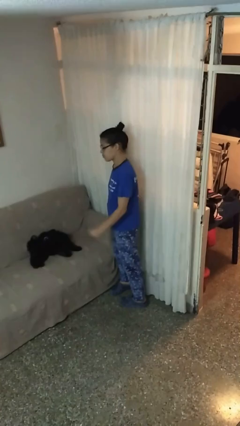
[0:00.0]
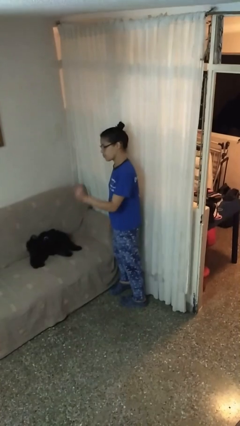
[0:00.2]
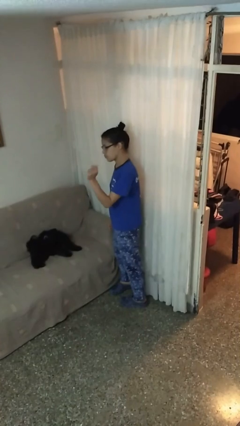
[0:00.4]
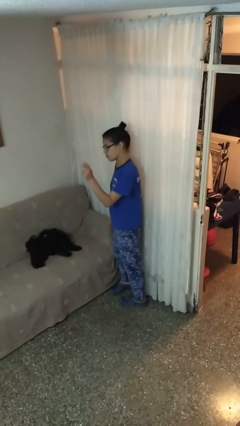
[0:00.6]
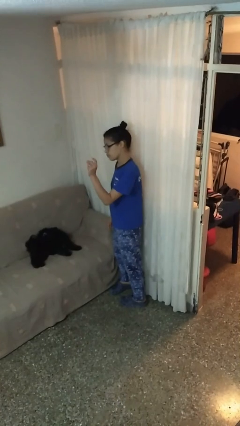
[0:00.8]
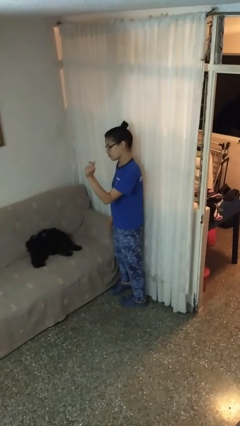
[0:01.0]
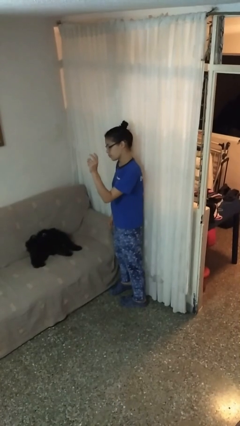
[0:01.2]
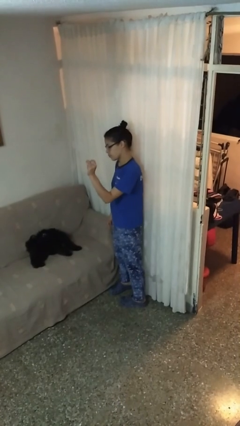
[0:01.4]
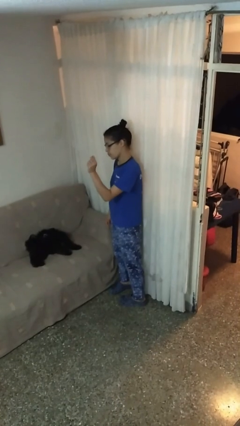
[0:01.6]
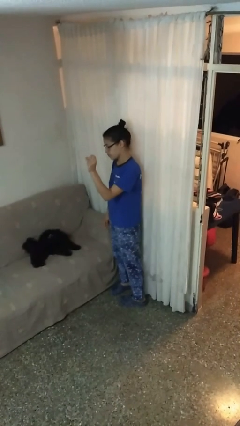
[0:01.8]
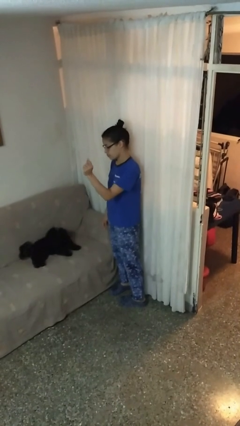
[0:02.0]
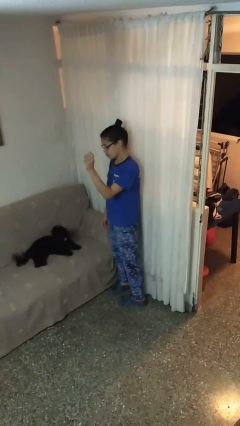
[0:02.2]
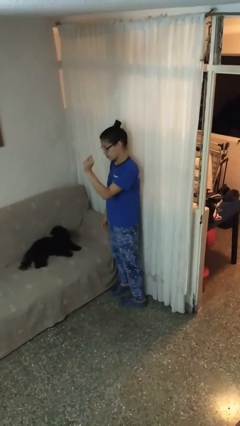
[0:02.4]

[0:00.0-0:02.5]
person snaps fingers

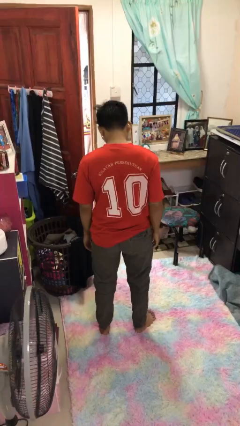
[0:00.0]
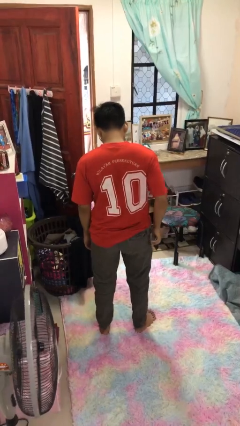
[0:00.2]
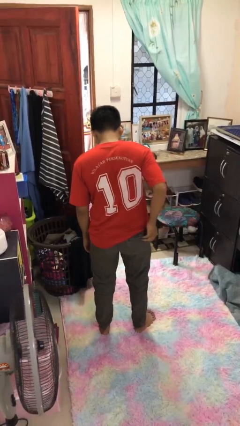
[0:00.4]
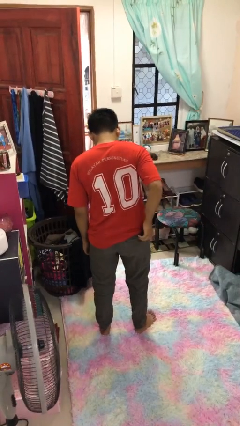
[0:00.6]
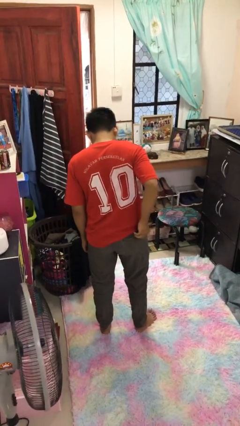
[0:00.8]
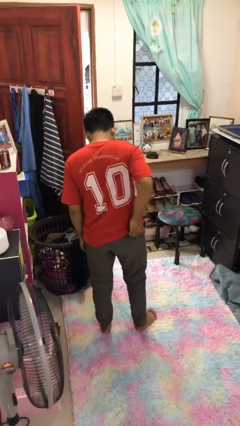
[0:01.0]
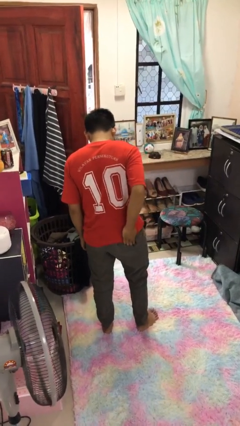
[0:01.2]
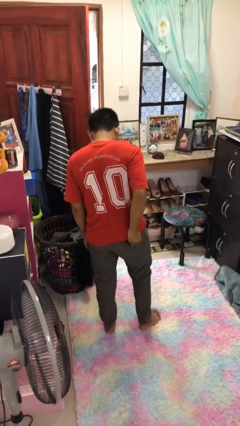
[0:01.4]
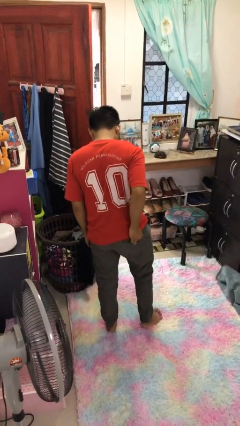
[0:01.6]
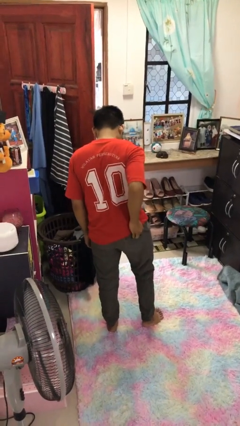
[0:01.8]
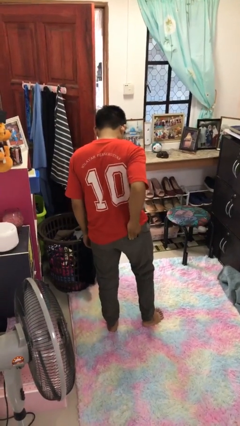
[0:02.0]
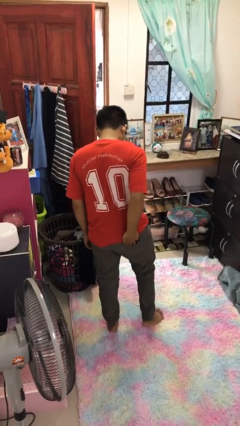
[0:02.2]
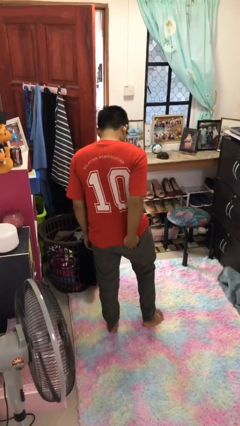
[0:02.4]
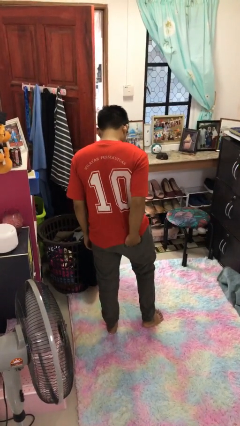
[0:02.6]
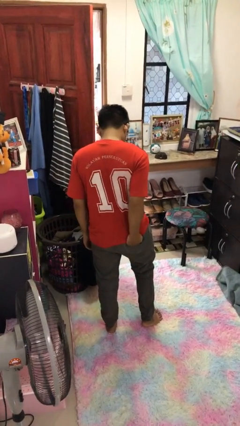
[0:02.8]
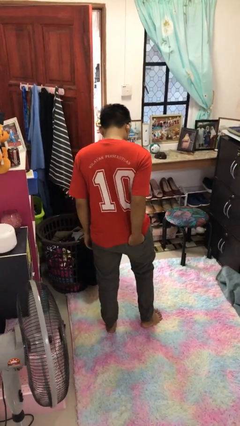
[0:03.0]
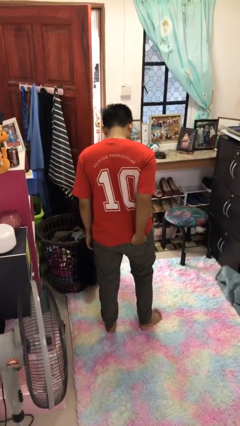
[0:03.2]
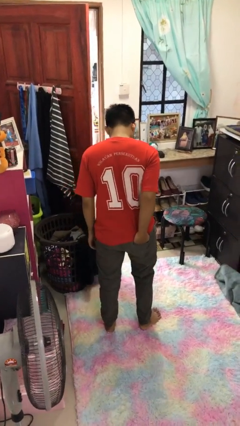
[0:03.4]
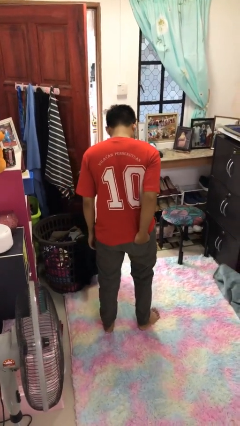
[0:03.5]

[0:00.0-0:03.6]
person puts hands in back pockets

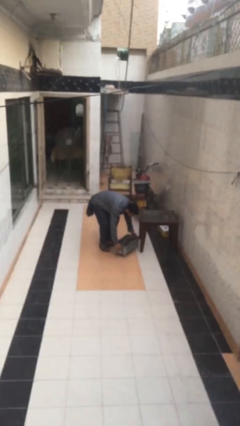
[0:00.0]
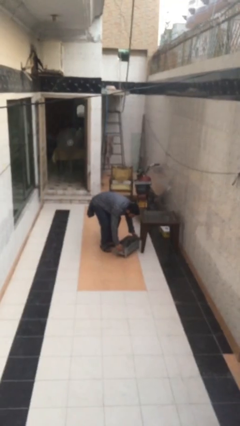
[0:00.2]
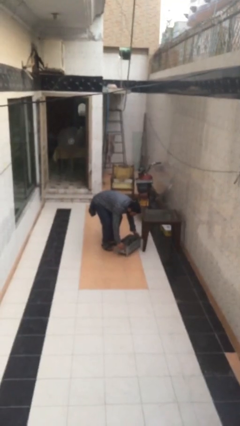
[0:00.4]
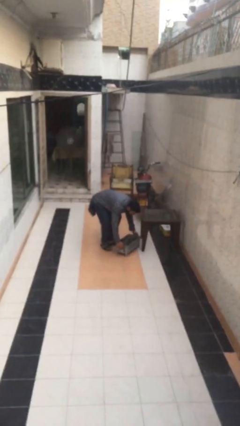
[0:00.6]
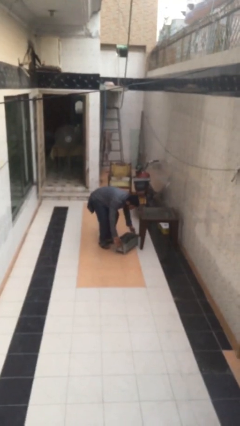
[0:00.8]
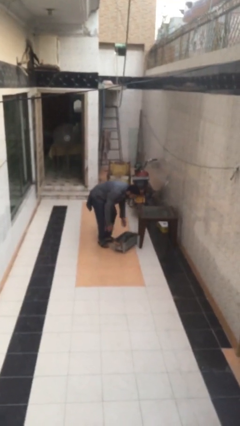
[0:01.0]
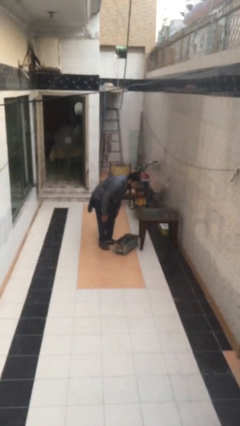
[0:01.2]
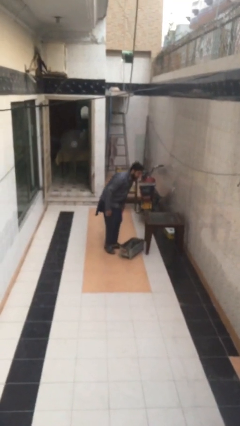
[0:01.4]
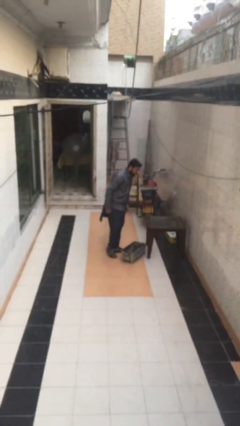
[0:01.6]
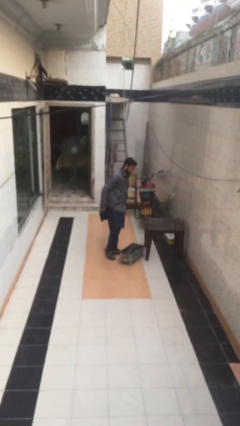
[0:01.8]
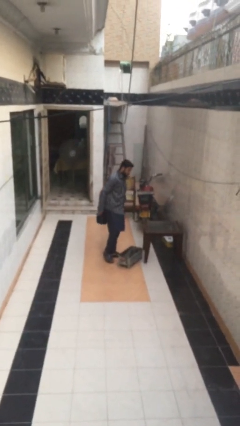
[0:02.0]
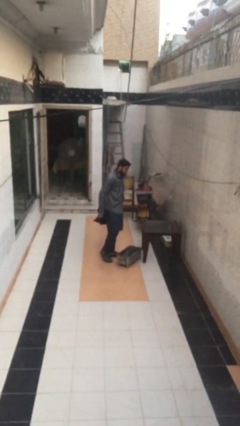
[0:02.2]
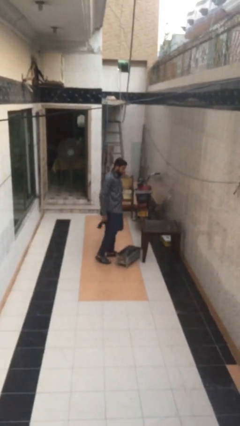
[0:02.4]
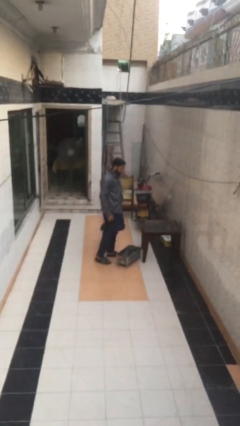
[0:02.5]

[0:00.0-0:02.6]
person puts down object on floor

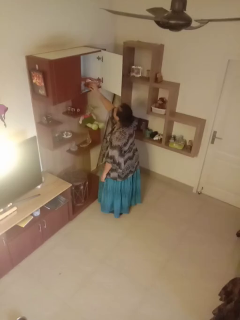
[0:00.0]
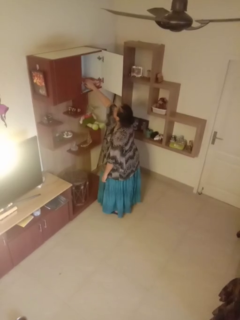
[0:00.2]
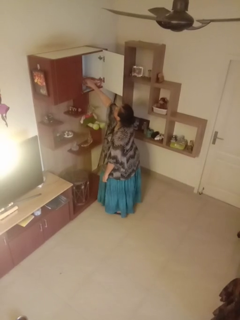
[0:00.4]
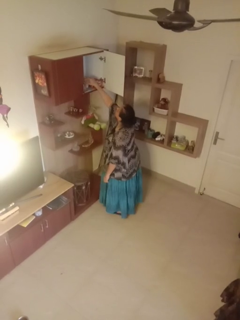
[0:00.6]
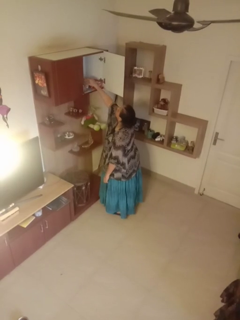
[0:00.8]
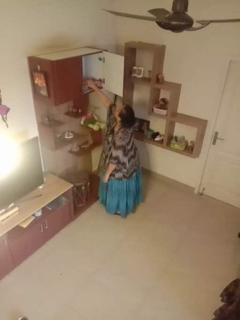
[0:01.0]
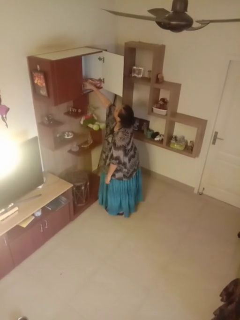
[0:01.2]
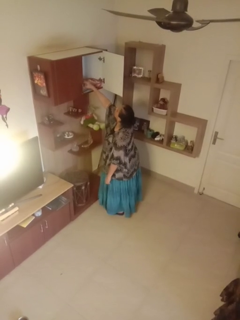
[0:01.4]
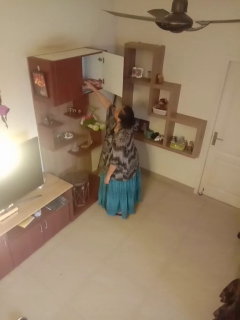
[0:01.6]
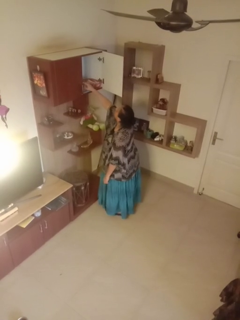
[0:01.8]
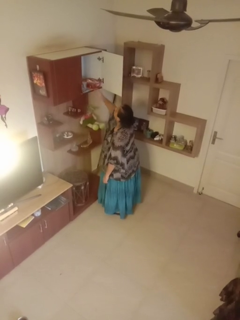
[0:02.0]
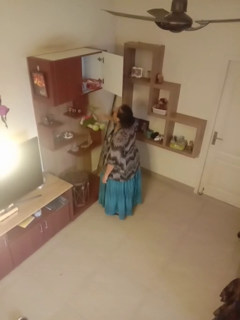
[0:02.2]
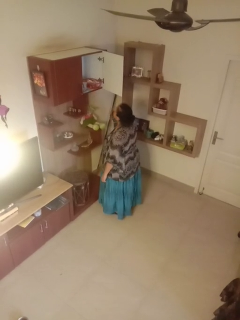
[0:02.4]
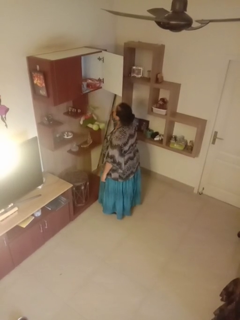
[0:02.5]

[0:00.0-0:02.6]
person searches in cabinet

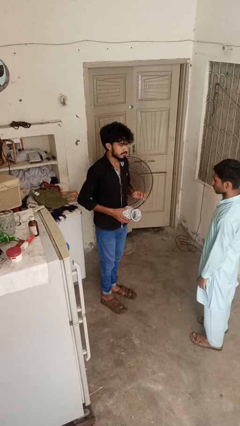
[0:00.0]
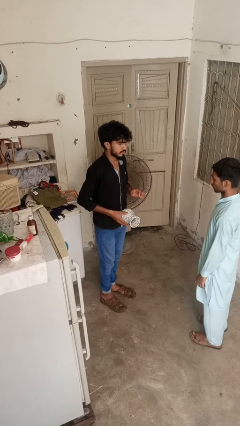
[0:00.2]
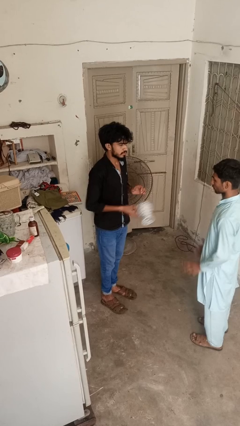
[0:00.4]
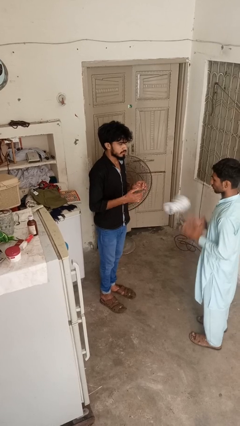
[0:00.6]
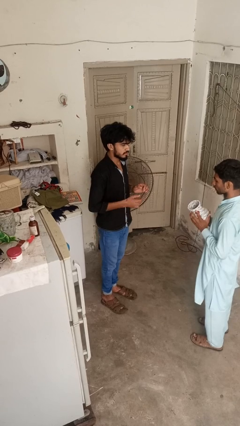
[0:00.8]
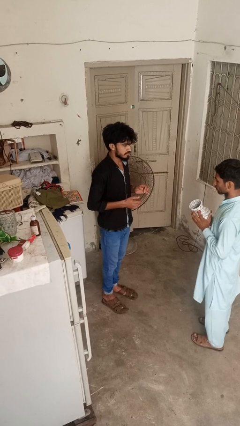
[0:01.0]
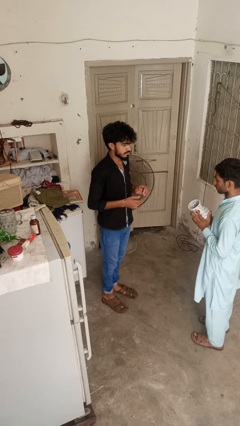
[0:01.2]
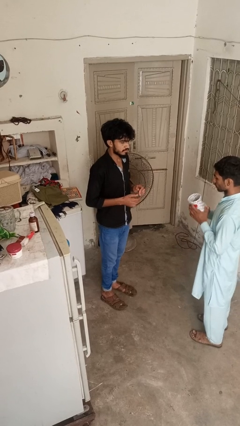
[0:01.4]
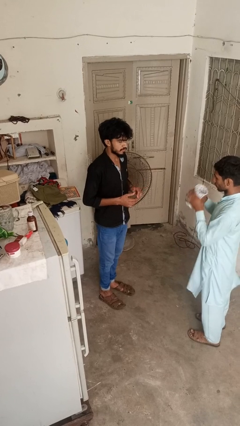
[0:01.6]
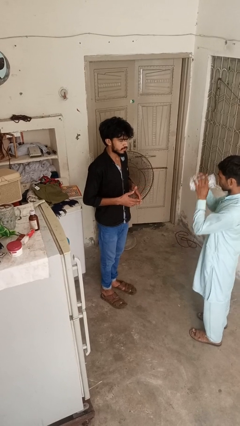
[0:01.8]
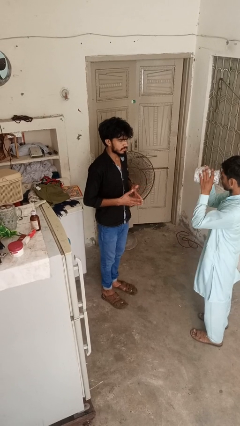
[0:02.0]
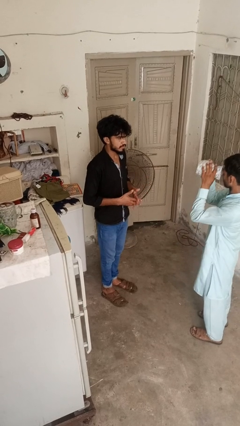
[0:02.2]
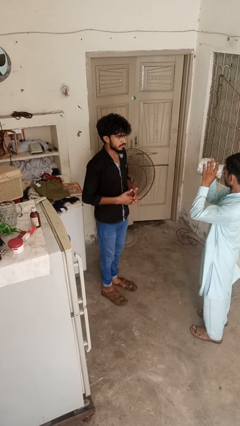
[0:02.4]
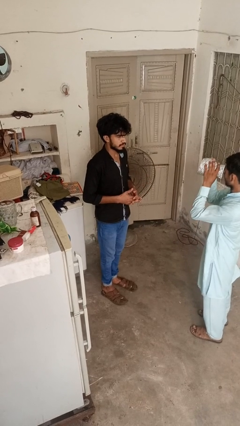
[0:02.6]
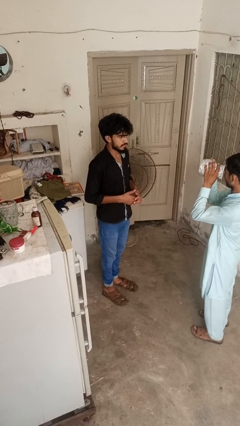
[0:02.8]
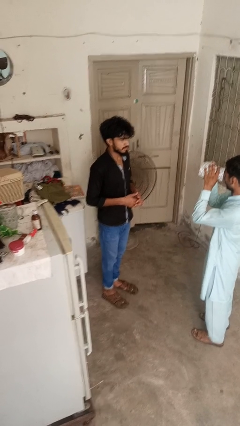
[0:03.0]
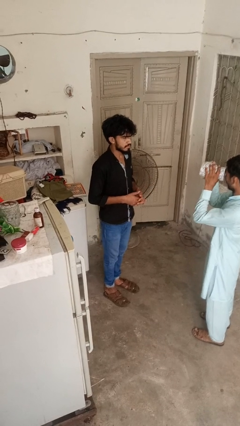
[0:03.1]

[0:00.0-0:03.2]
person throws object to person

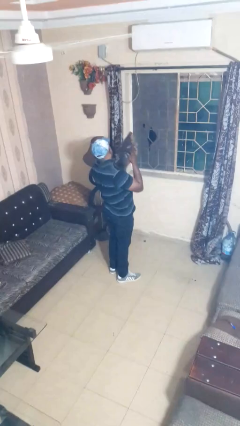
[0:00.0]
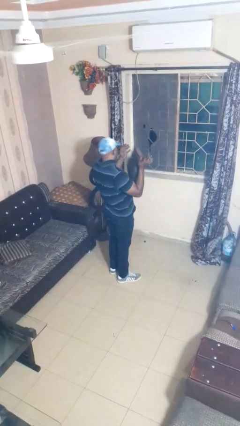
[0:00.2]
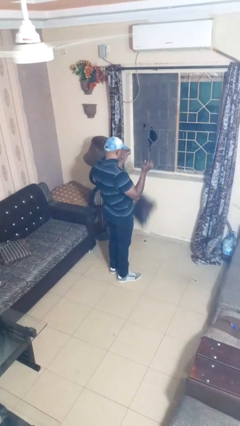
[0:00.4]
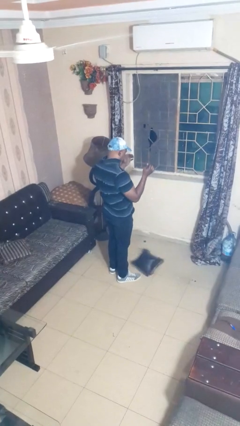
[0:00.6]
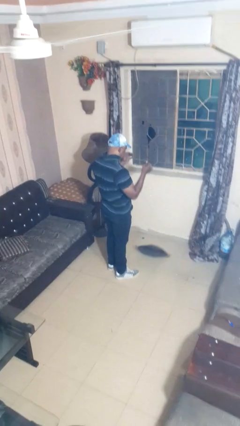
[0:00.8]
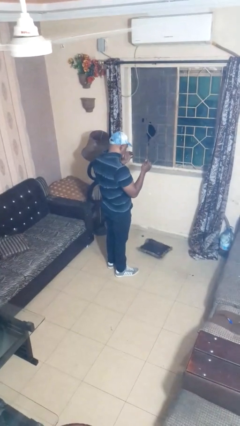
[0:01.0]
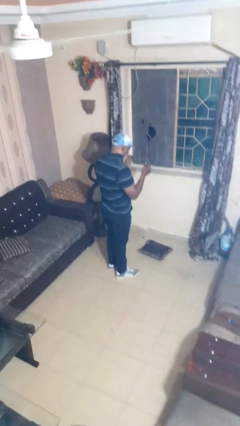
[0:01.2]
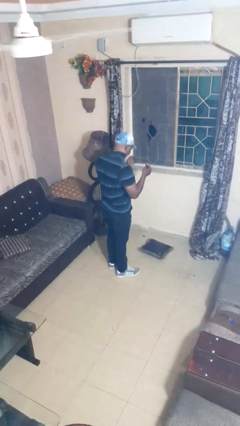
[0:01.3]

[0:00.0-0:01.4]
person catches dropped object

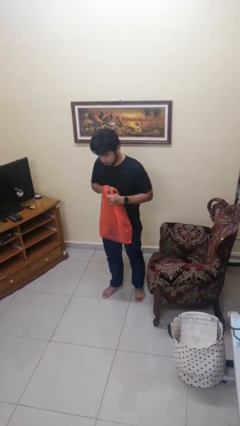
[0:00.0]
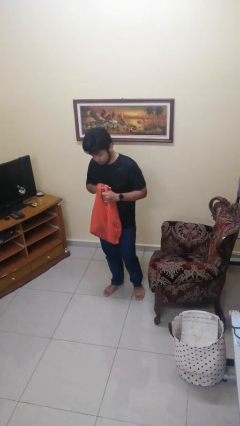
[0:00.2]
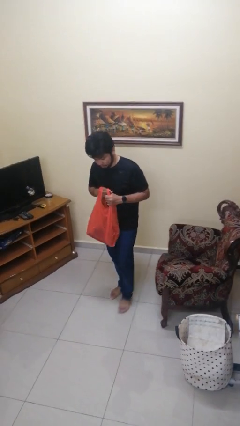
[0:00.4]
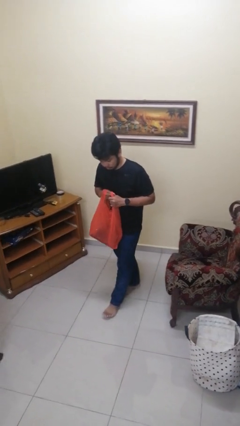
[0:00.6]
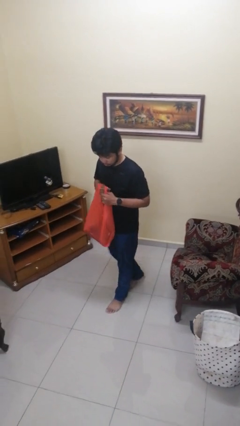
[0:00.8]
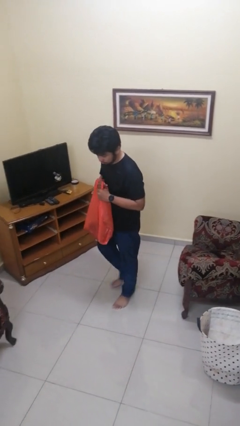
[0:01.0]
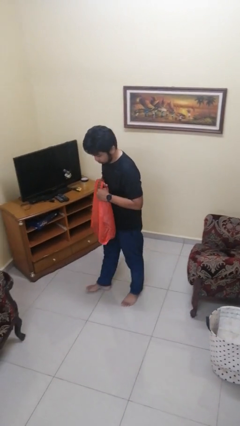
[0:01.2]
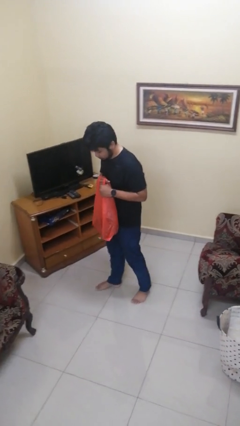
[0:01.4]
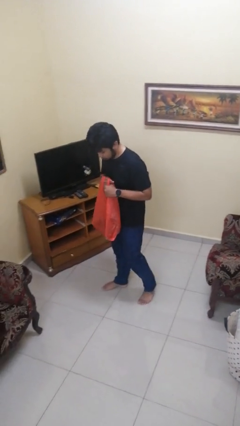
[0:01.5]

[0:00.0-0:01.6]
person carries groceries

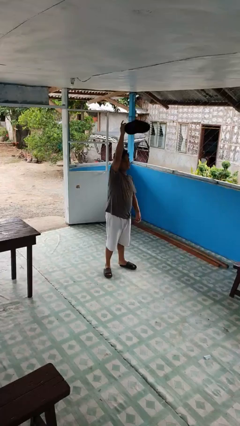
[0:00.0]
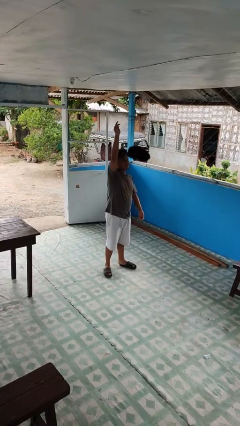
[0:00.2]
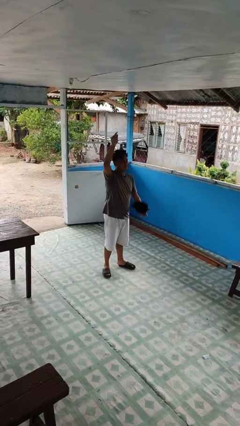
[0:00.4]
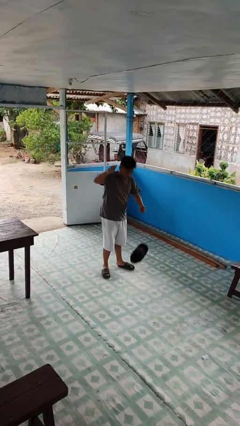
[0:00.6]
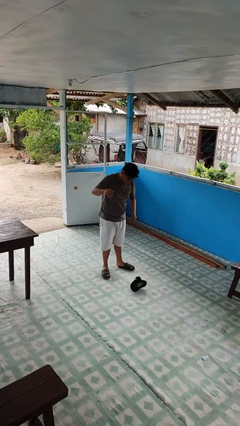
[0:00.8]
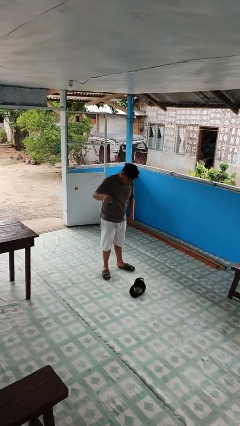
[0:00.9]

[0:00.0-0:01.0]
person drops object
